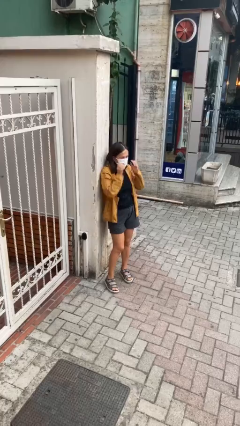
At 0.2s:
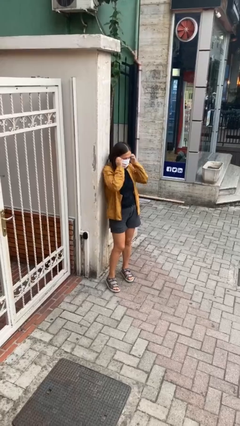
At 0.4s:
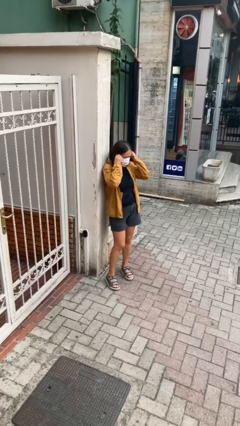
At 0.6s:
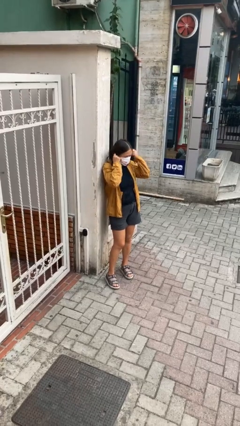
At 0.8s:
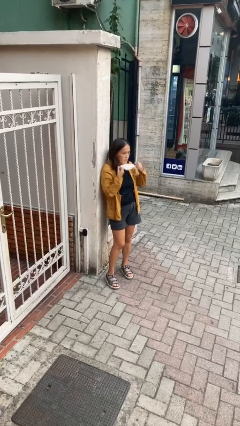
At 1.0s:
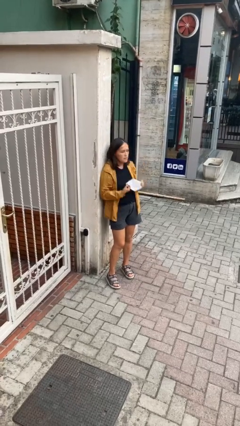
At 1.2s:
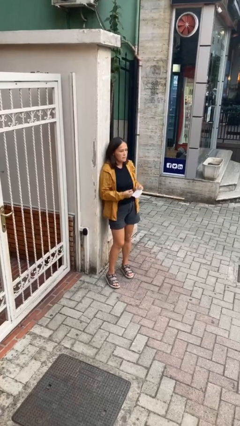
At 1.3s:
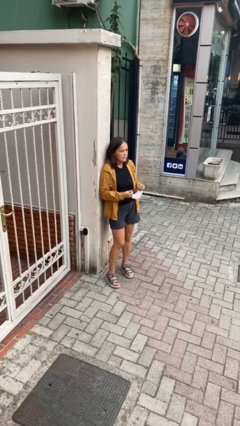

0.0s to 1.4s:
person takes off facemask

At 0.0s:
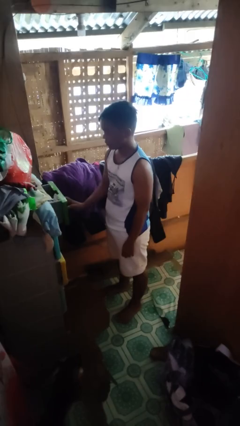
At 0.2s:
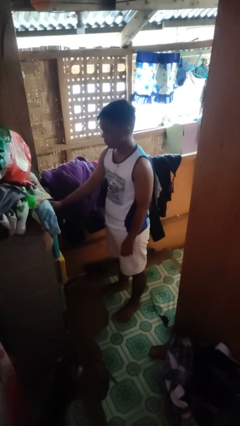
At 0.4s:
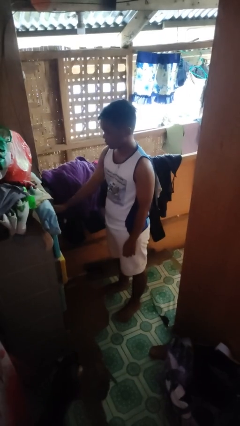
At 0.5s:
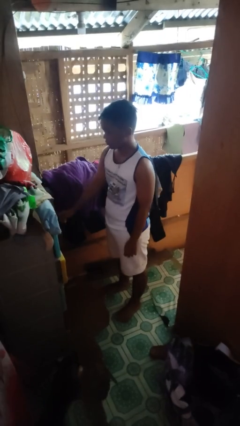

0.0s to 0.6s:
person closes dresser drawer

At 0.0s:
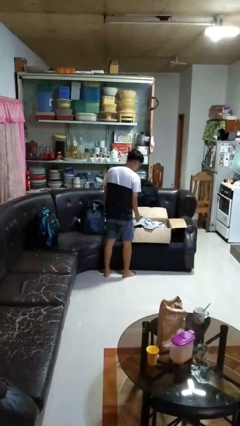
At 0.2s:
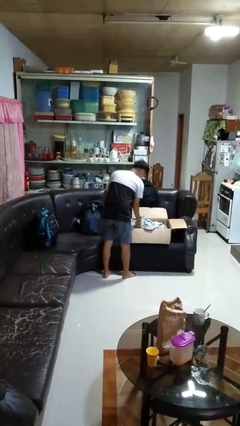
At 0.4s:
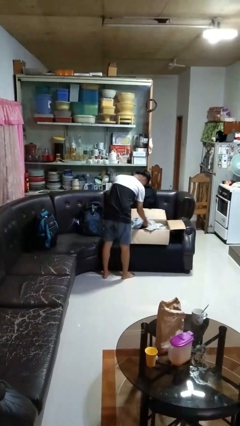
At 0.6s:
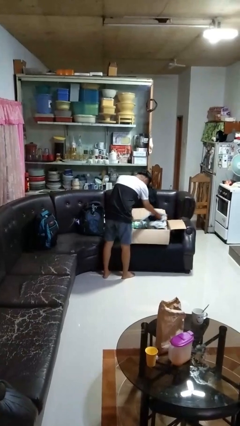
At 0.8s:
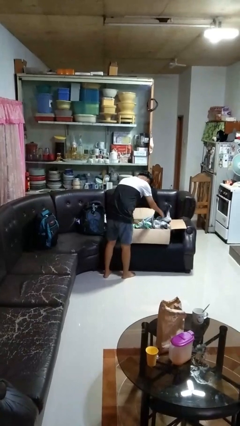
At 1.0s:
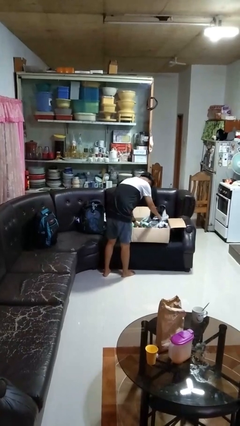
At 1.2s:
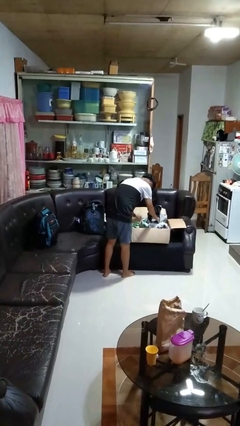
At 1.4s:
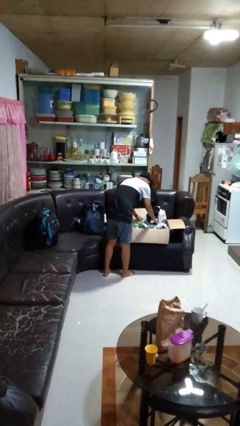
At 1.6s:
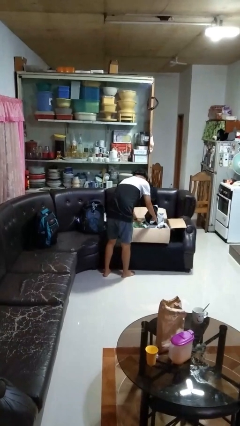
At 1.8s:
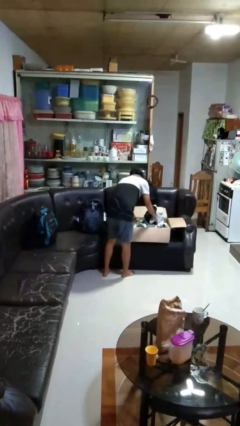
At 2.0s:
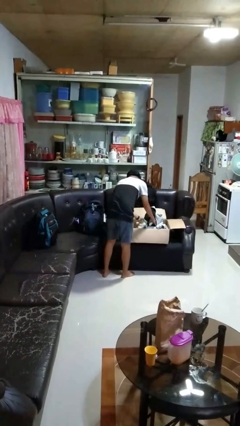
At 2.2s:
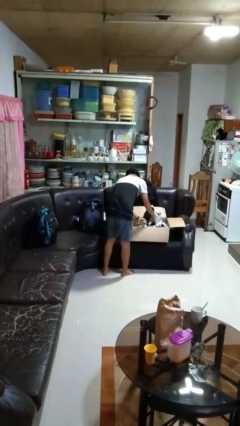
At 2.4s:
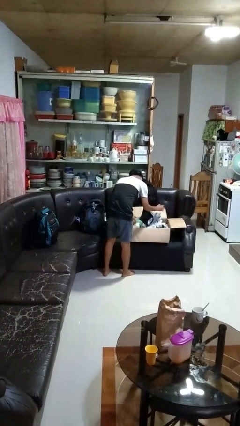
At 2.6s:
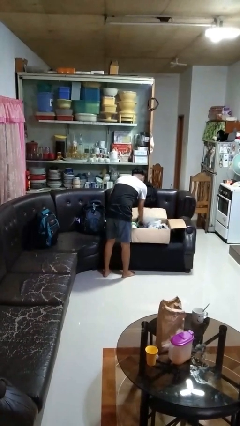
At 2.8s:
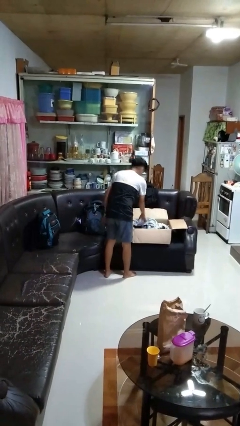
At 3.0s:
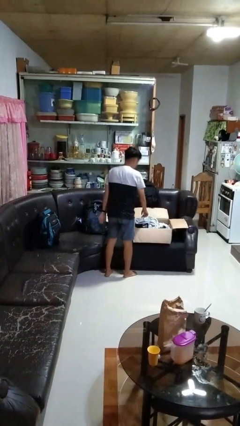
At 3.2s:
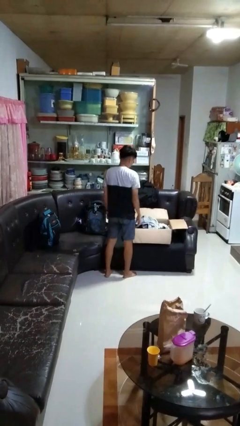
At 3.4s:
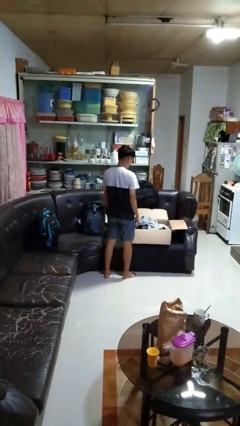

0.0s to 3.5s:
person searches in box

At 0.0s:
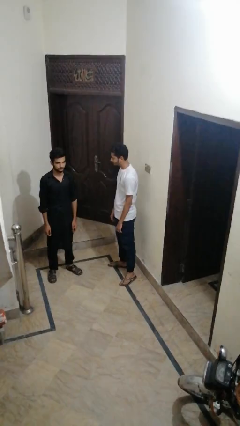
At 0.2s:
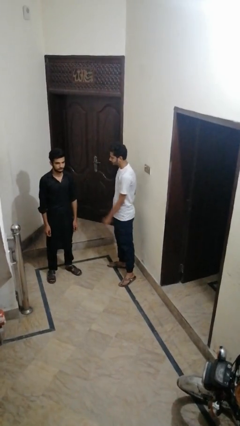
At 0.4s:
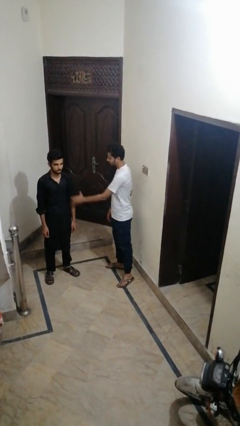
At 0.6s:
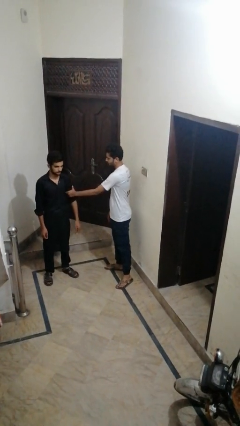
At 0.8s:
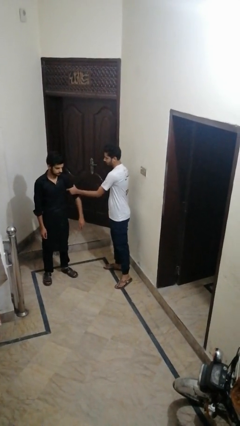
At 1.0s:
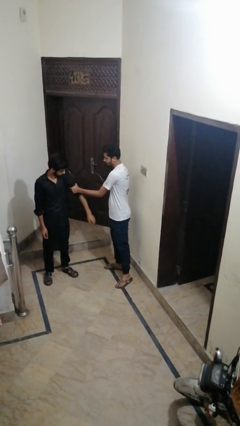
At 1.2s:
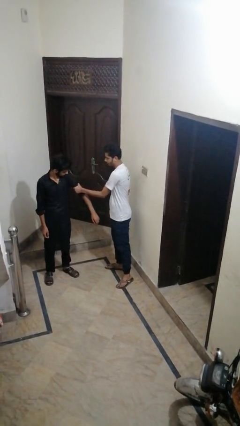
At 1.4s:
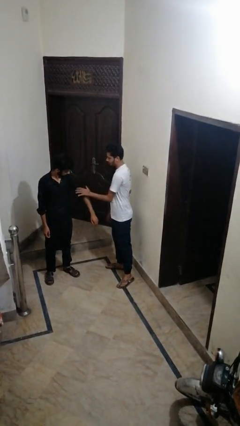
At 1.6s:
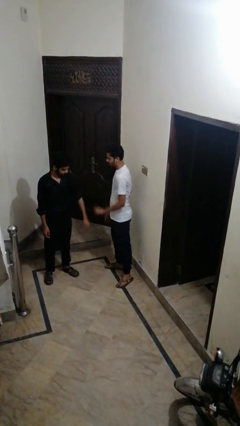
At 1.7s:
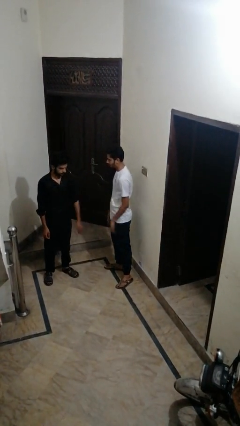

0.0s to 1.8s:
person grabs person by bicep

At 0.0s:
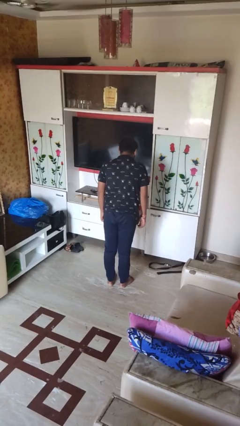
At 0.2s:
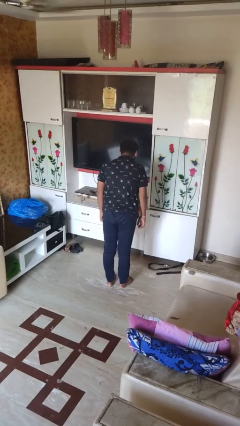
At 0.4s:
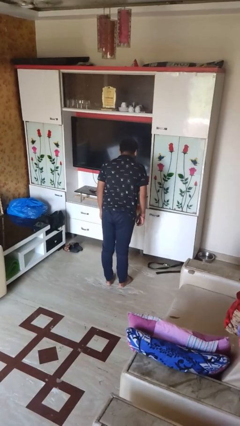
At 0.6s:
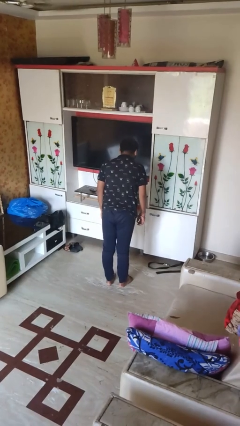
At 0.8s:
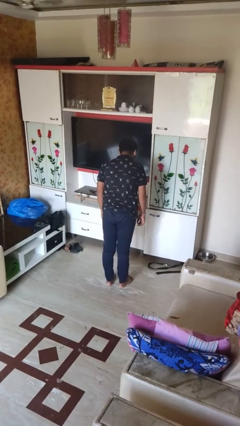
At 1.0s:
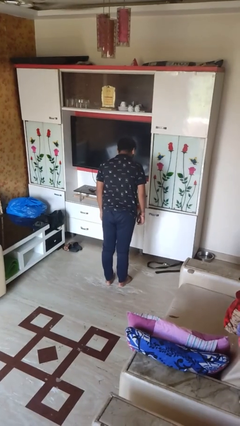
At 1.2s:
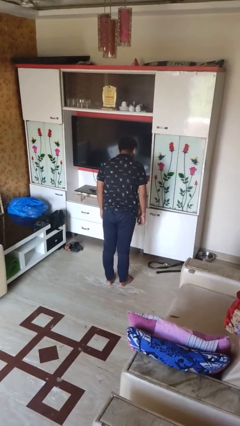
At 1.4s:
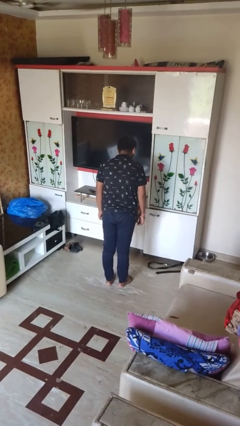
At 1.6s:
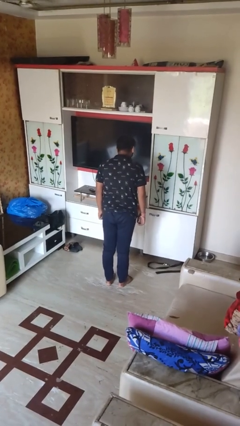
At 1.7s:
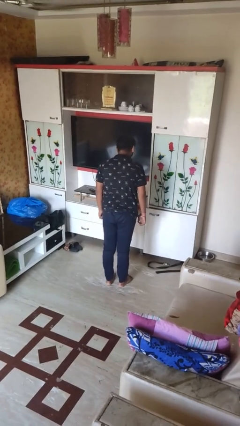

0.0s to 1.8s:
person wiggles hips

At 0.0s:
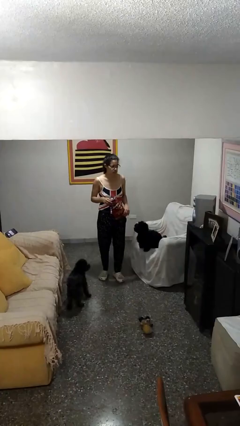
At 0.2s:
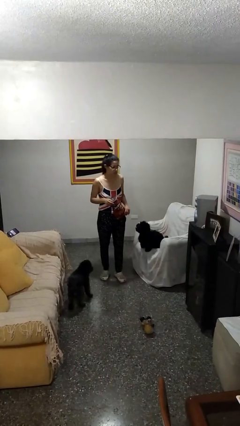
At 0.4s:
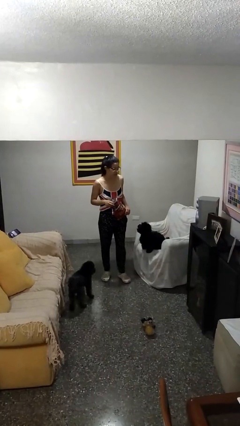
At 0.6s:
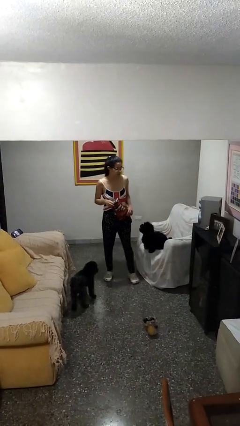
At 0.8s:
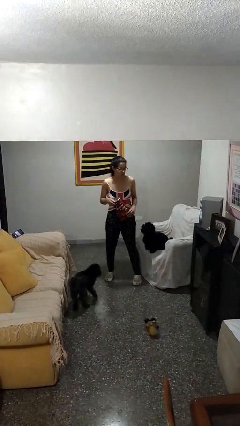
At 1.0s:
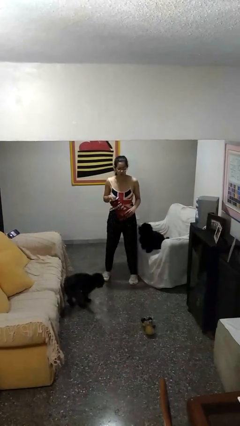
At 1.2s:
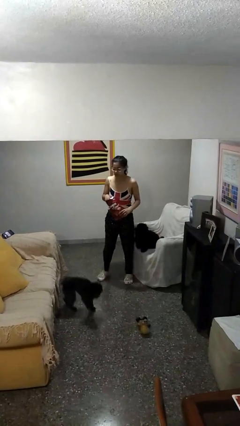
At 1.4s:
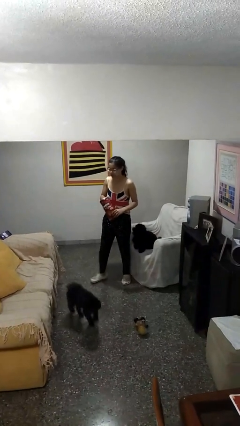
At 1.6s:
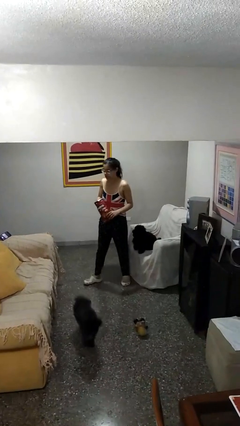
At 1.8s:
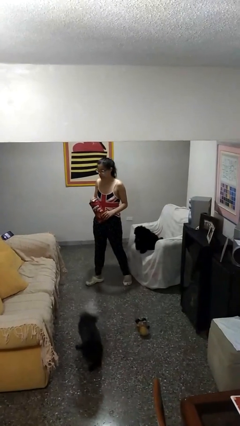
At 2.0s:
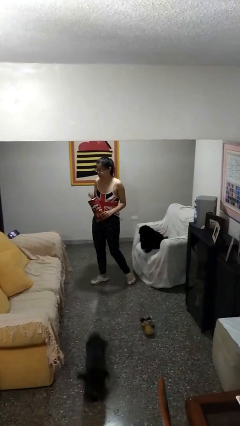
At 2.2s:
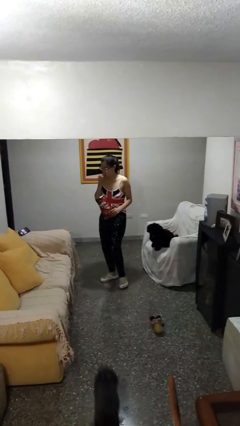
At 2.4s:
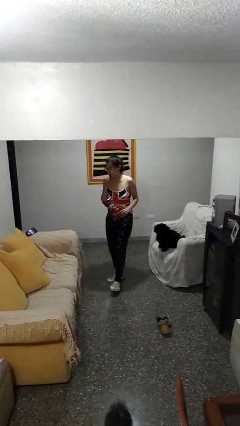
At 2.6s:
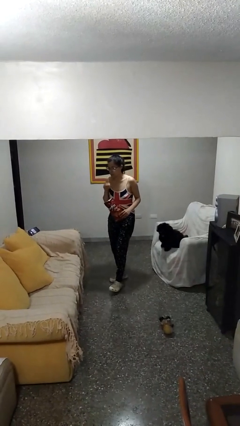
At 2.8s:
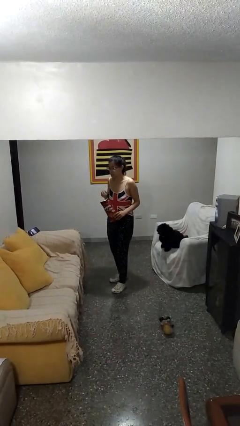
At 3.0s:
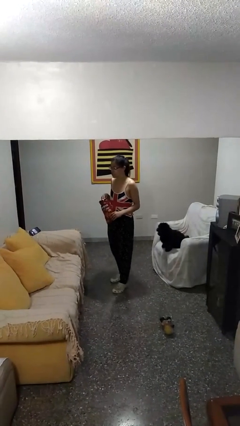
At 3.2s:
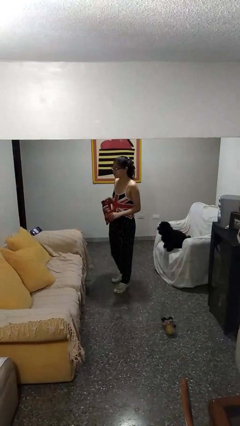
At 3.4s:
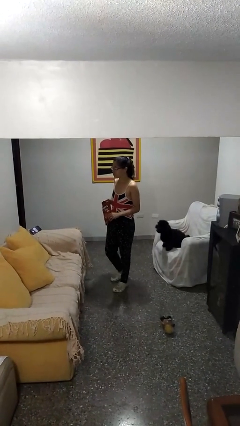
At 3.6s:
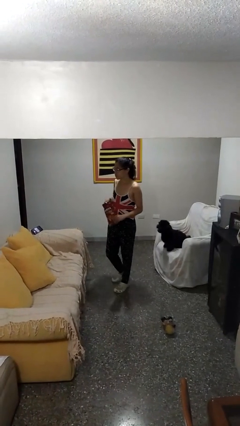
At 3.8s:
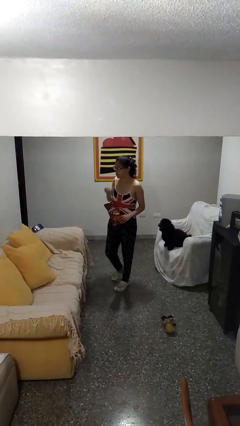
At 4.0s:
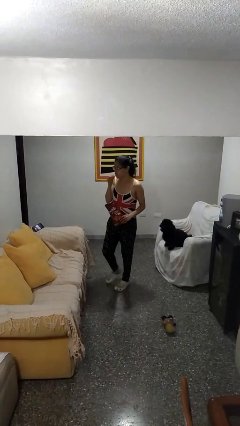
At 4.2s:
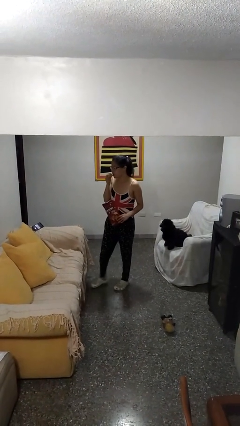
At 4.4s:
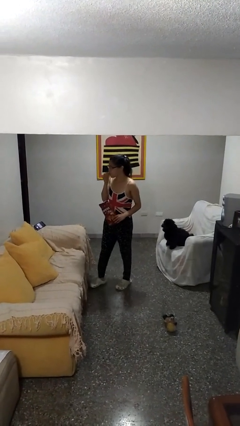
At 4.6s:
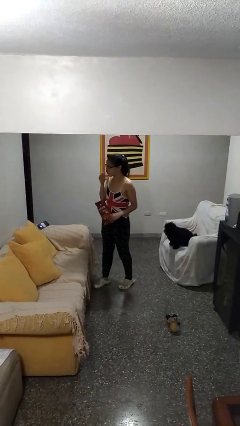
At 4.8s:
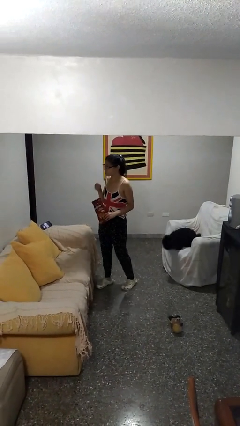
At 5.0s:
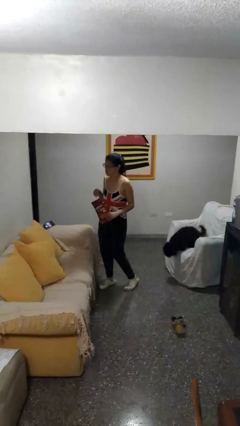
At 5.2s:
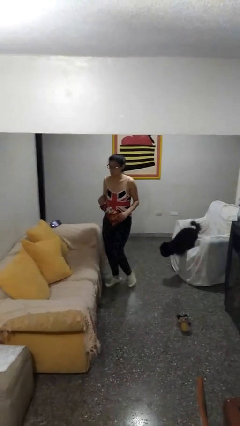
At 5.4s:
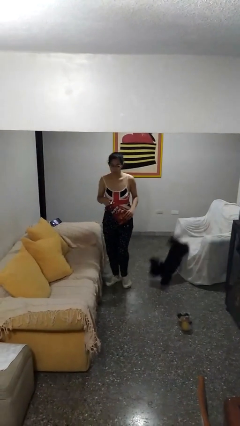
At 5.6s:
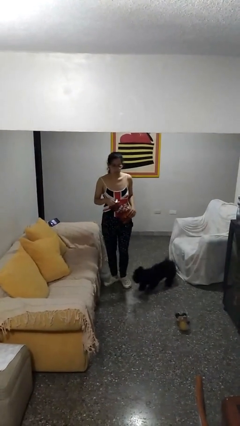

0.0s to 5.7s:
person eats snack from bag

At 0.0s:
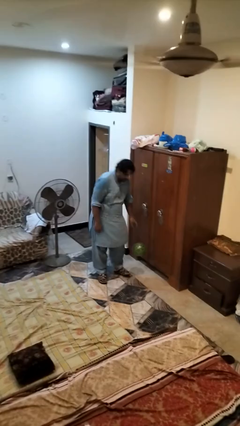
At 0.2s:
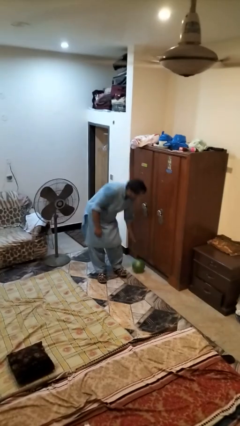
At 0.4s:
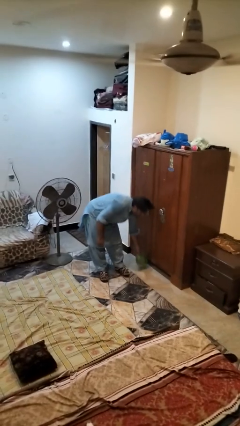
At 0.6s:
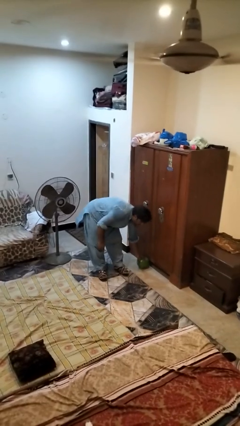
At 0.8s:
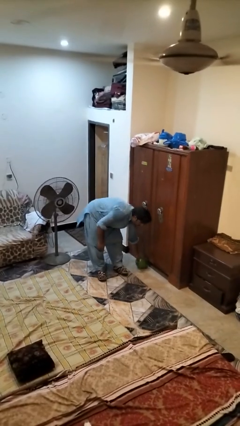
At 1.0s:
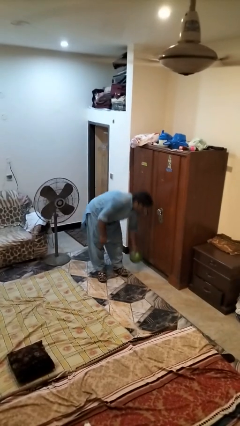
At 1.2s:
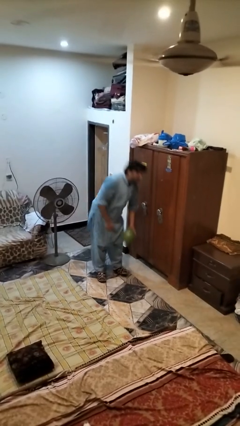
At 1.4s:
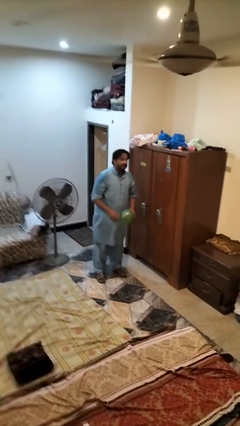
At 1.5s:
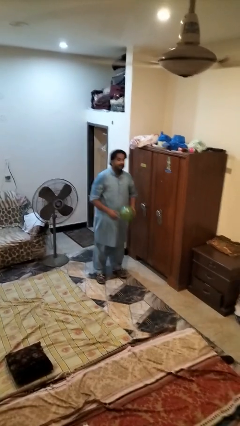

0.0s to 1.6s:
person catches dropped object

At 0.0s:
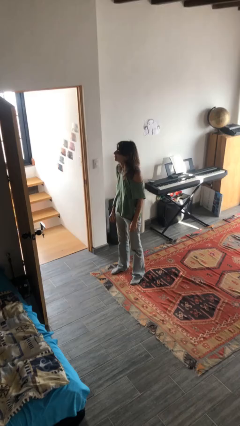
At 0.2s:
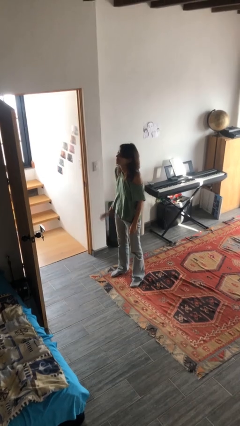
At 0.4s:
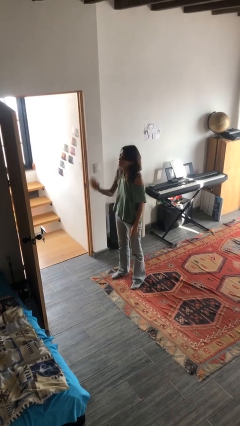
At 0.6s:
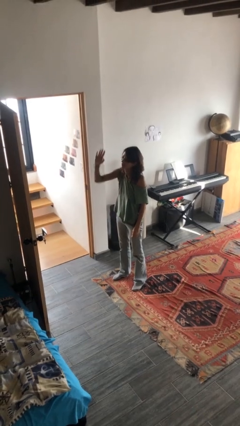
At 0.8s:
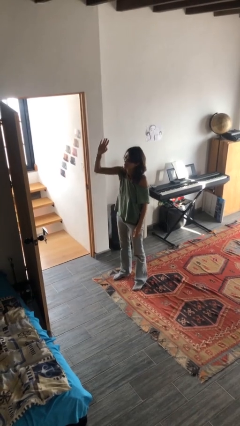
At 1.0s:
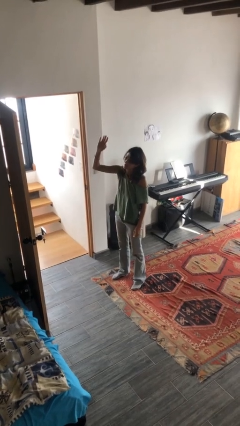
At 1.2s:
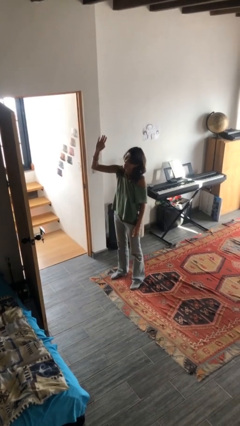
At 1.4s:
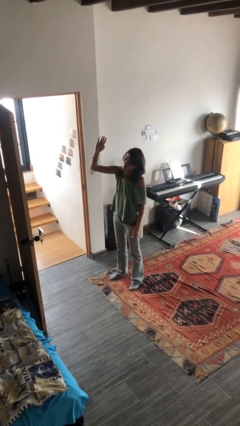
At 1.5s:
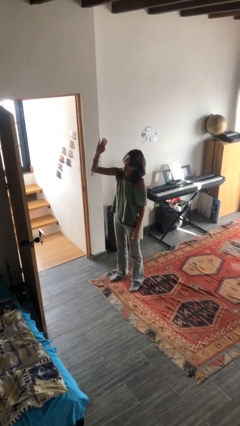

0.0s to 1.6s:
person gestures raise hand
